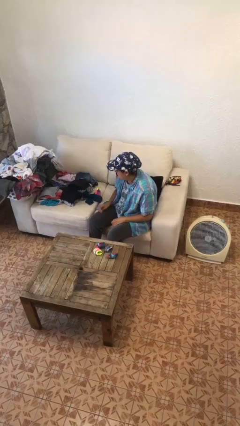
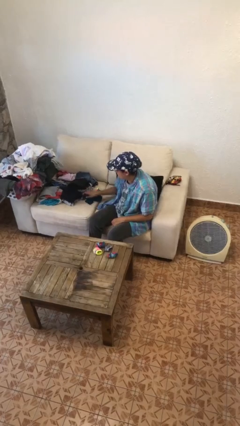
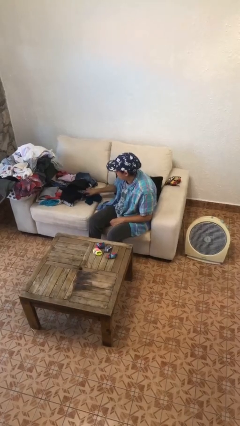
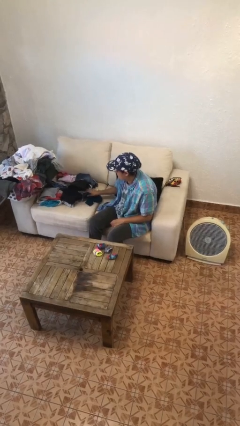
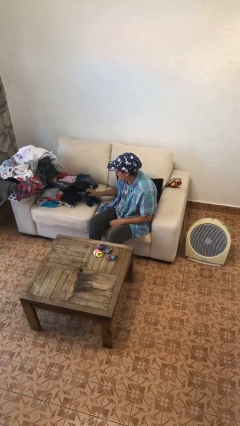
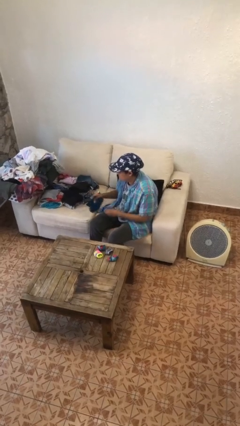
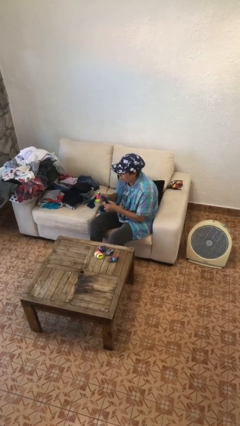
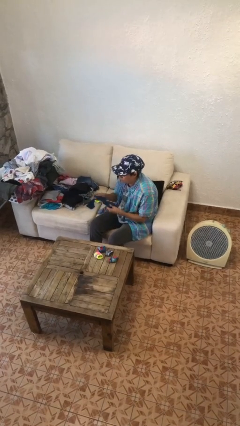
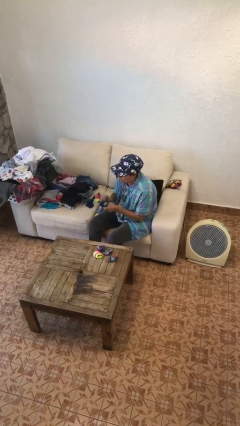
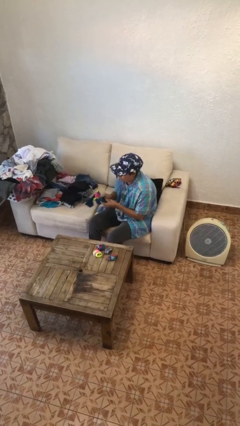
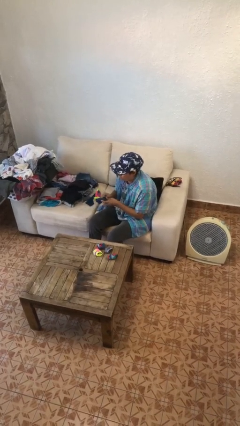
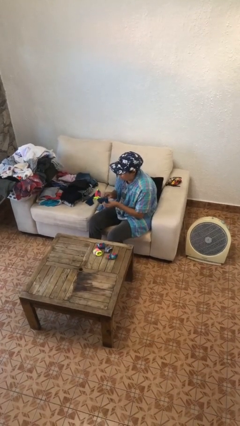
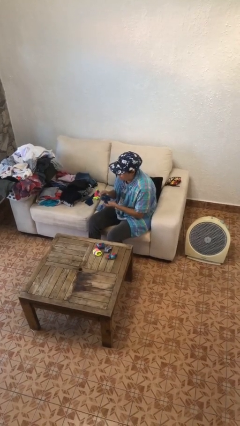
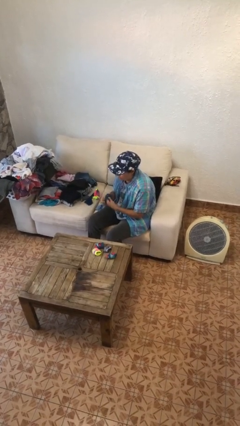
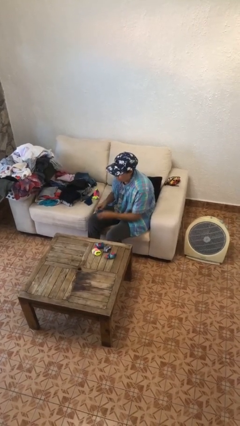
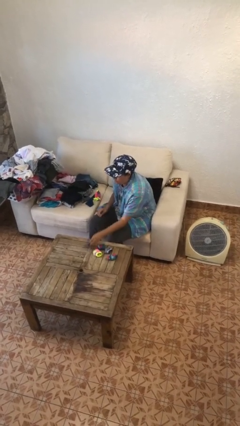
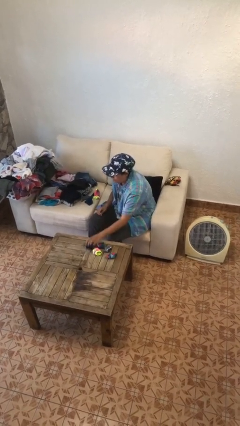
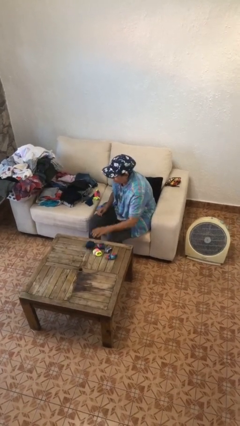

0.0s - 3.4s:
person folds socks

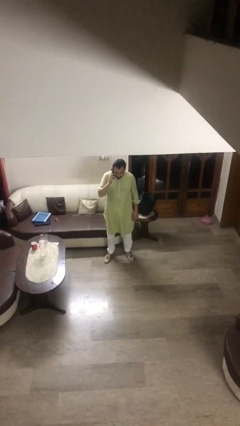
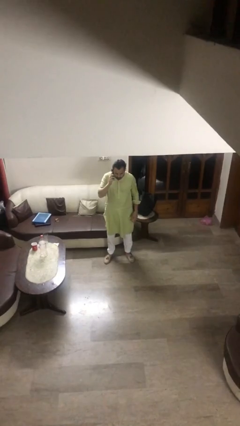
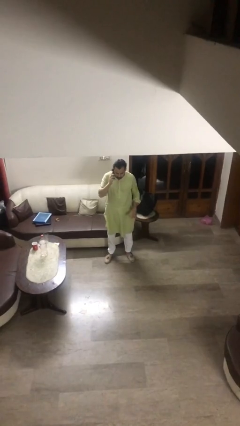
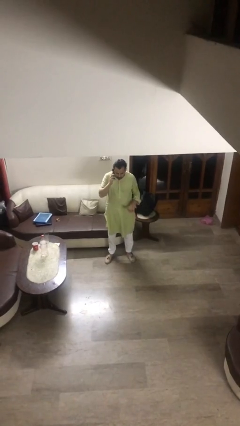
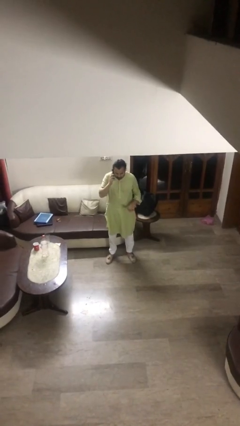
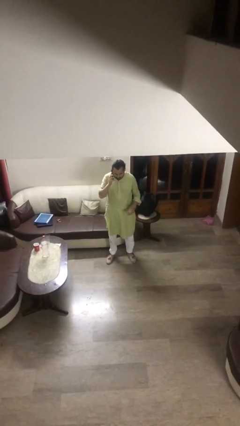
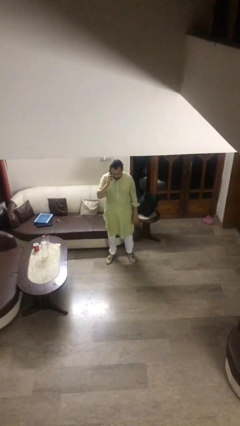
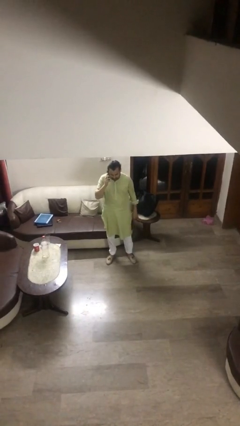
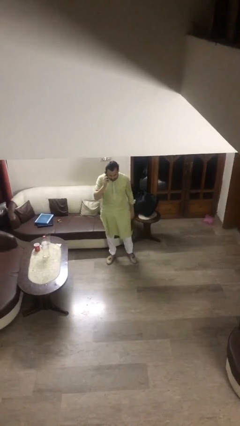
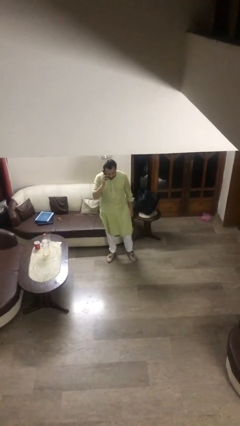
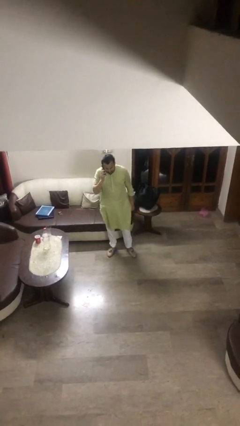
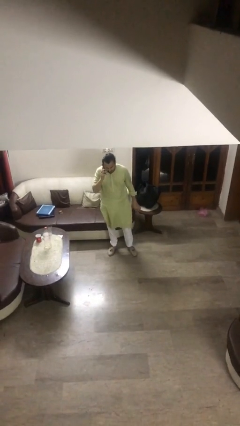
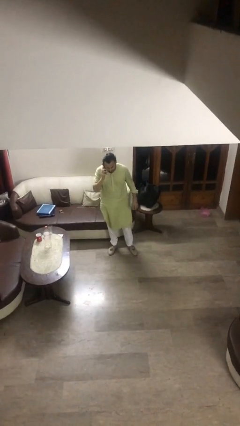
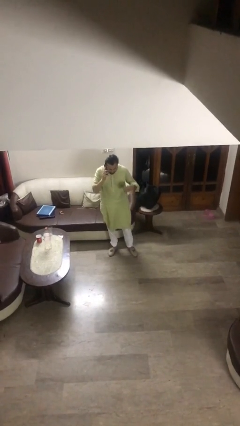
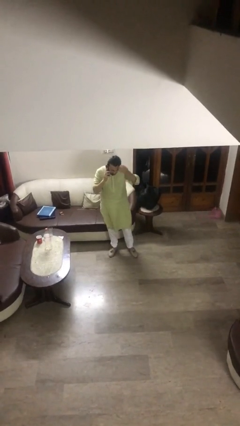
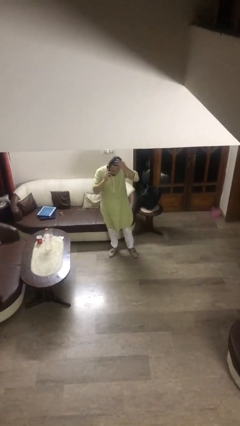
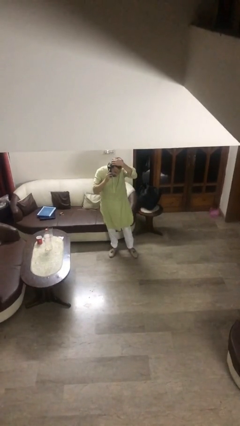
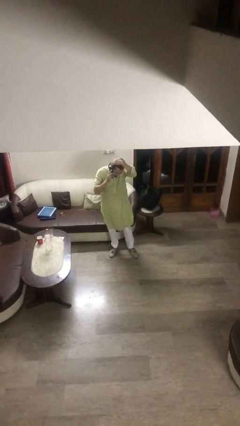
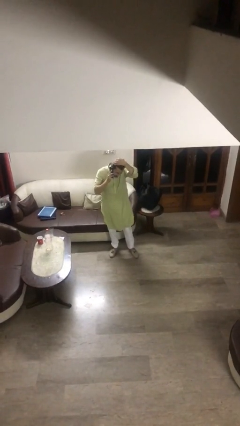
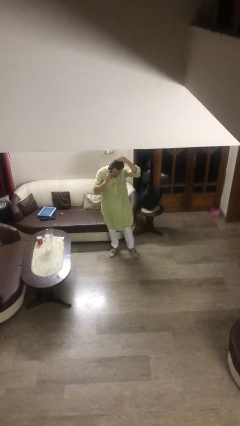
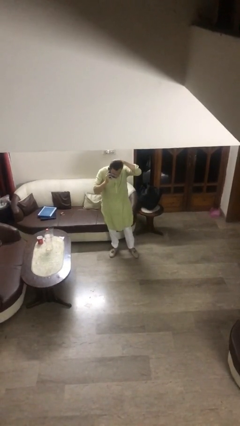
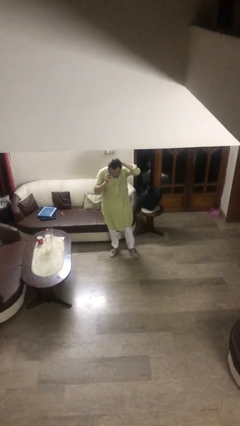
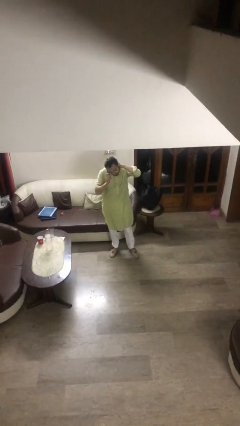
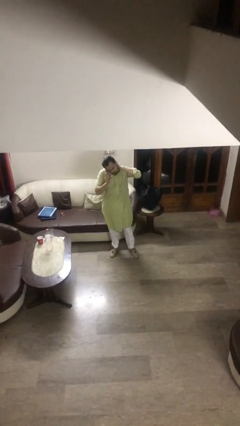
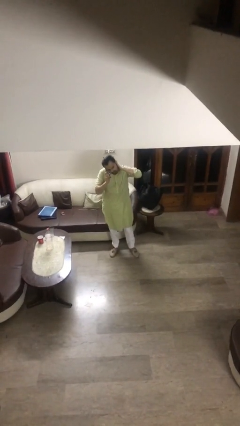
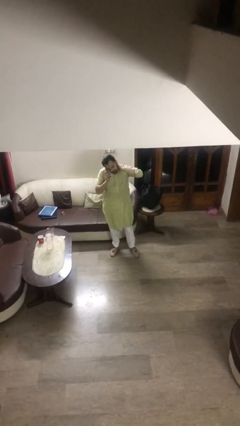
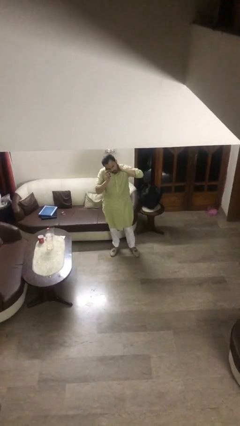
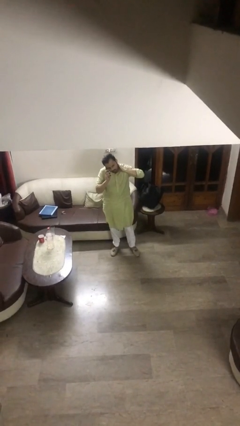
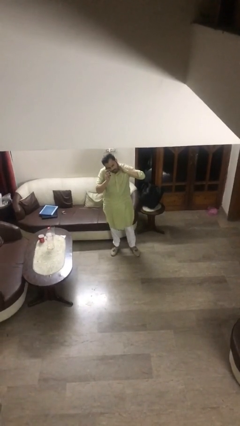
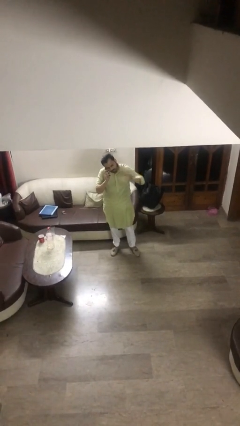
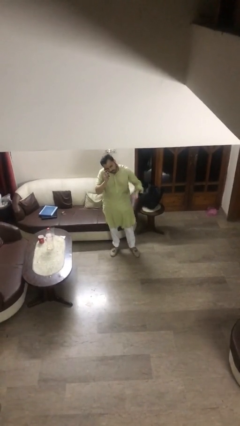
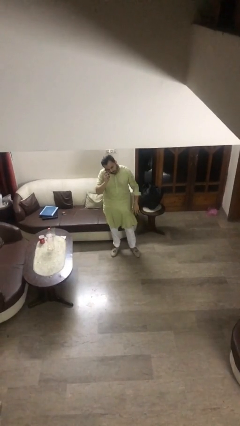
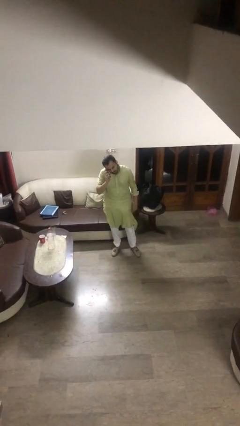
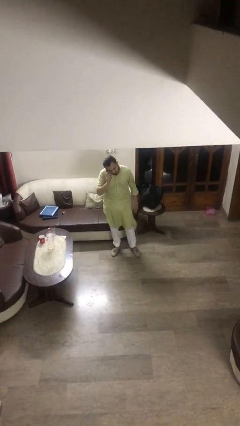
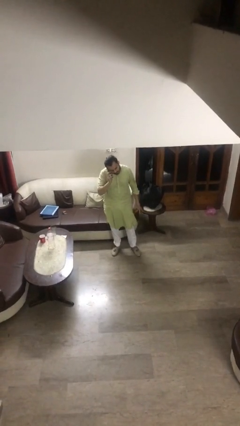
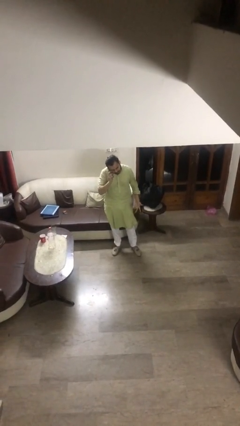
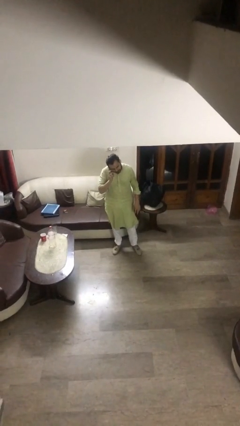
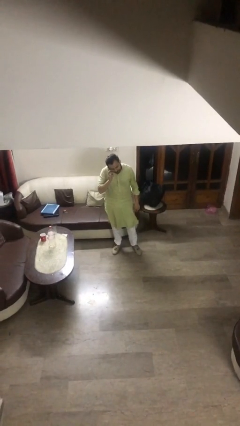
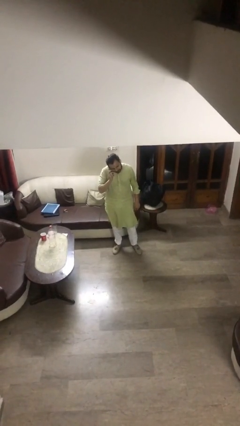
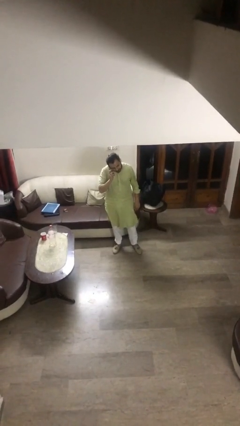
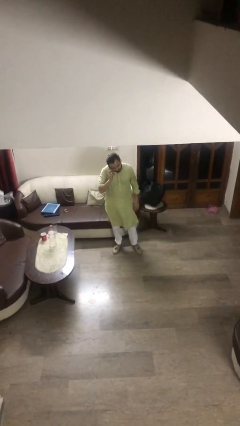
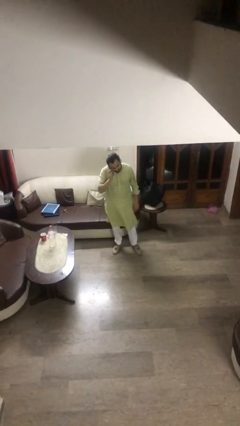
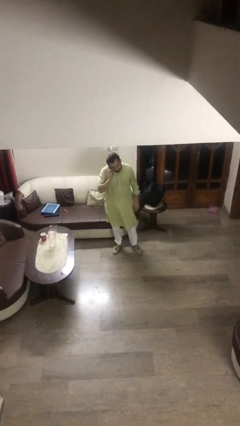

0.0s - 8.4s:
person talks on phone

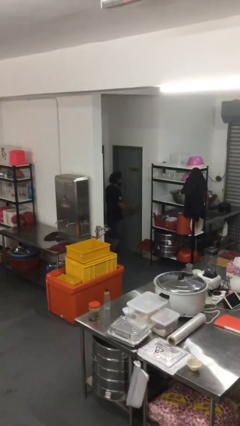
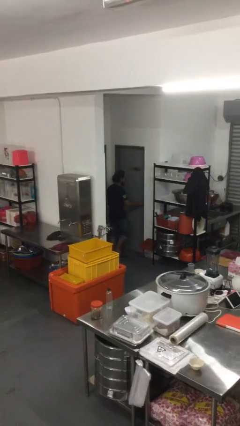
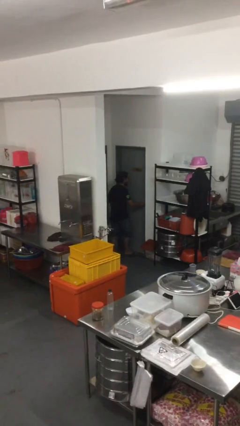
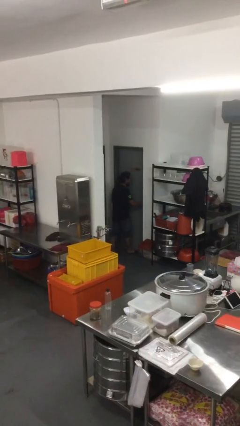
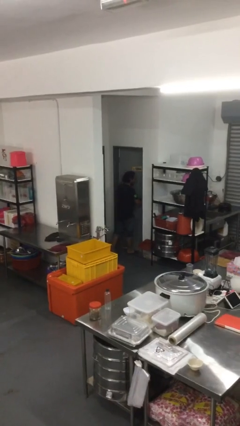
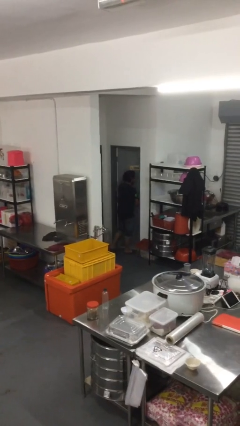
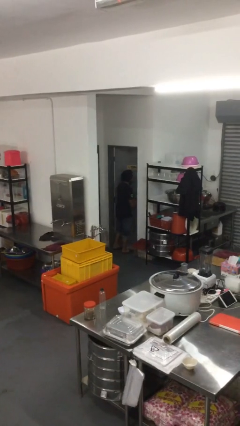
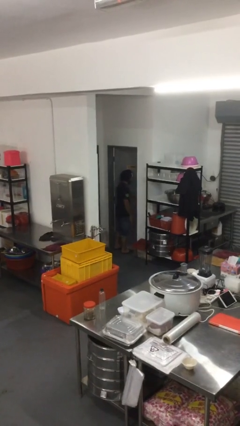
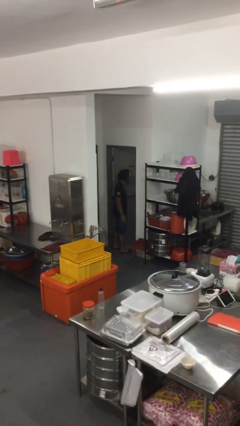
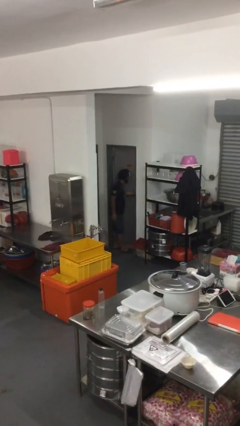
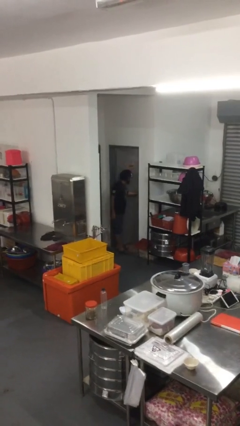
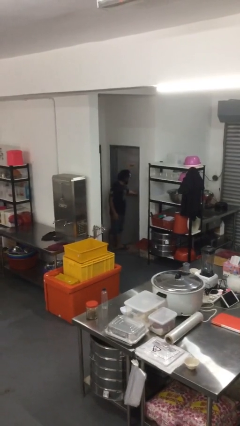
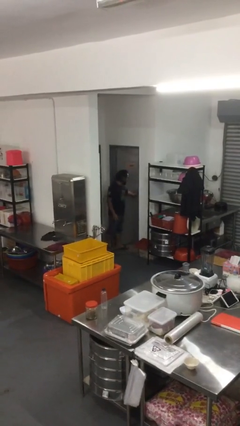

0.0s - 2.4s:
person opens facility door

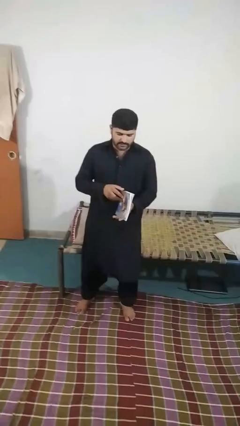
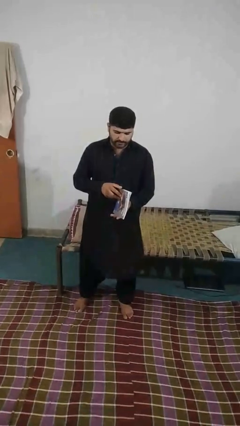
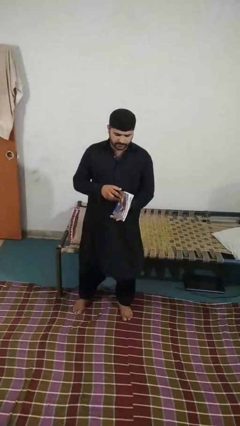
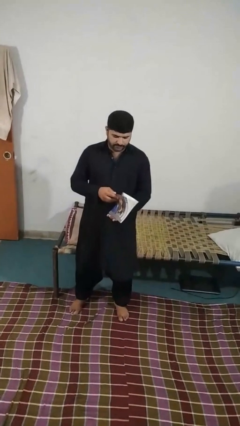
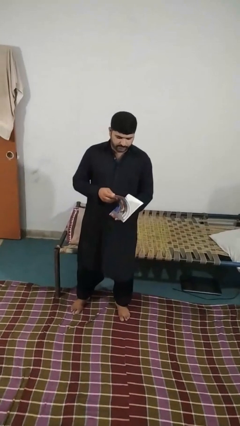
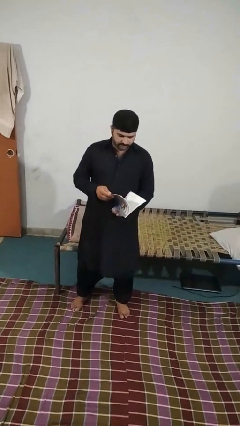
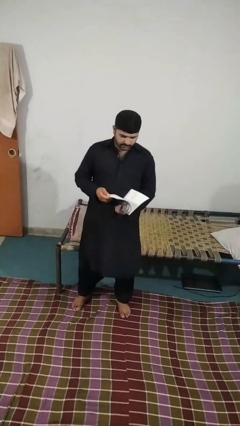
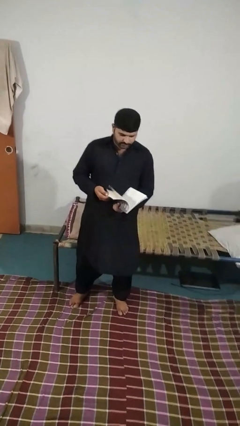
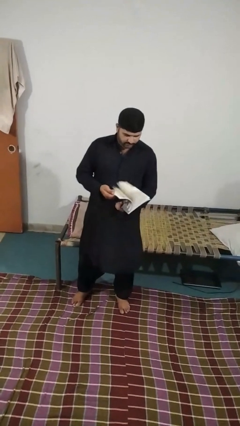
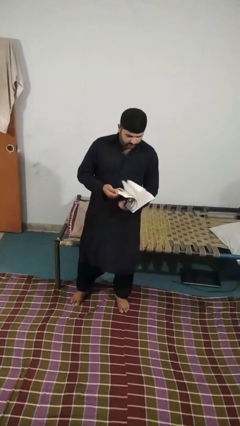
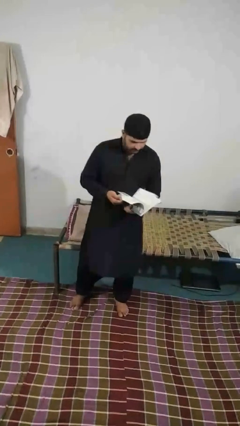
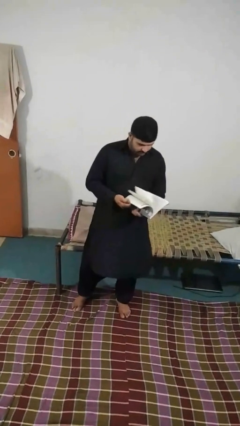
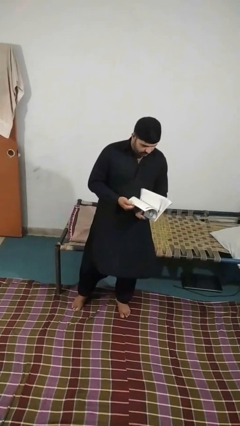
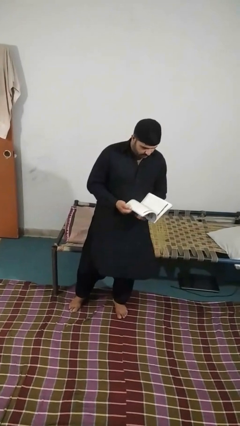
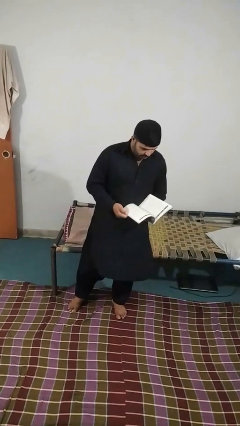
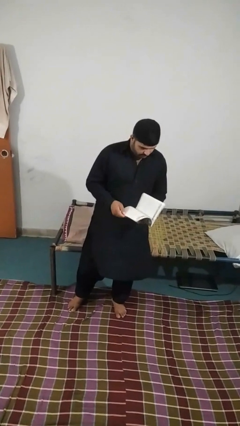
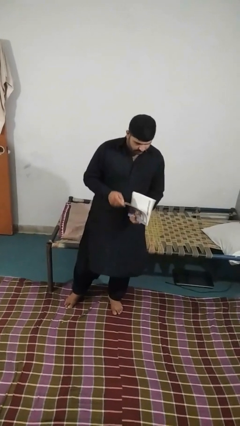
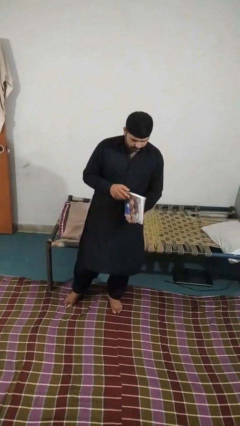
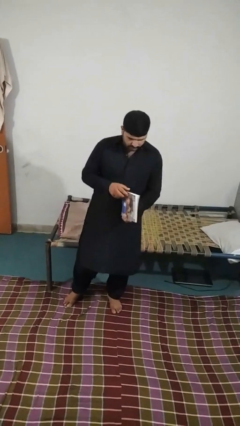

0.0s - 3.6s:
person reads magazine
